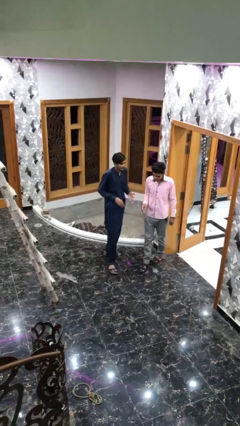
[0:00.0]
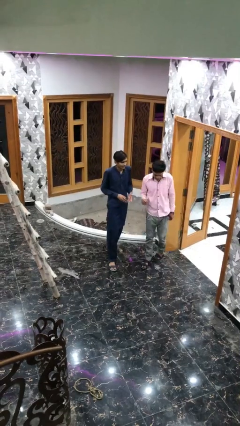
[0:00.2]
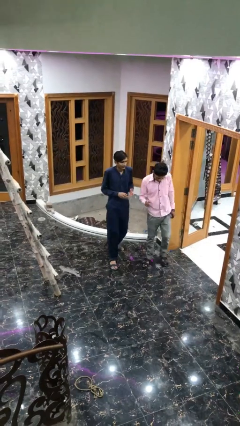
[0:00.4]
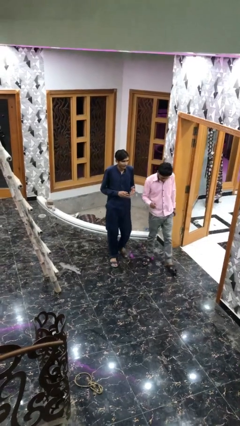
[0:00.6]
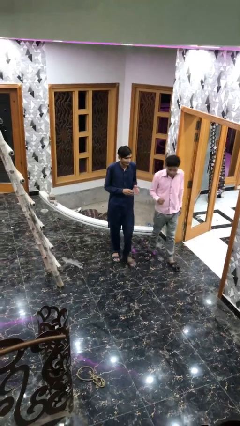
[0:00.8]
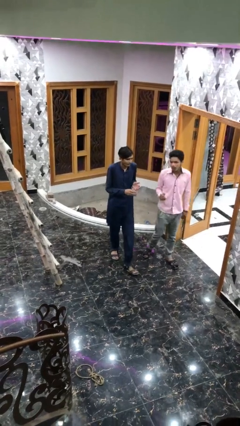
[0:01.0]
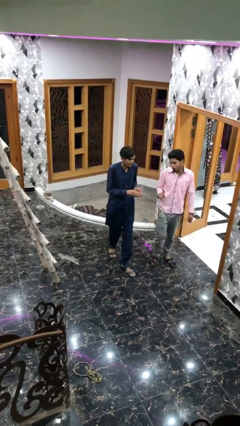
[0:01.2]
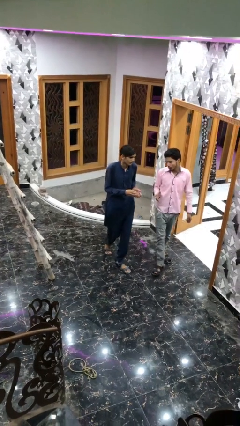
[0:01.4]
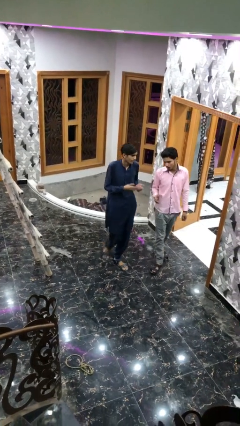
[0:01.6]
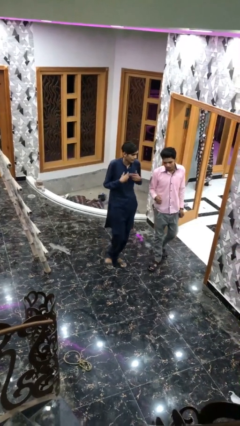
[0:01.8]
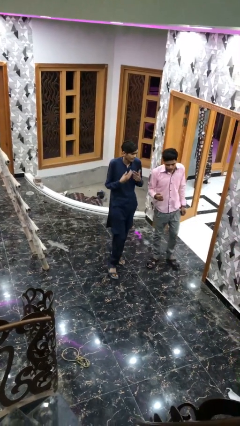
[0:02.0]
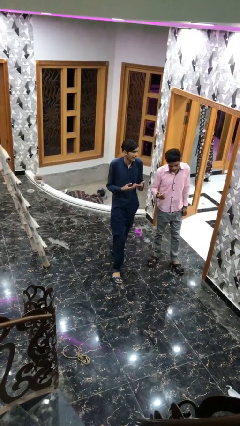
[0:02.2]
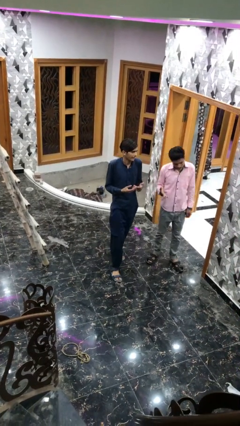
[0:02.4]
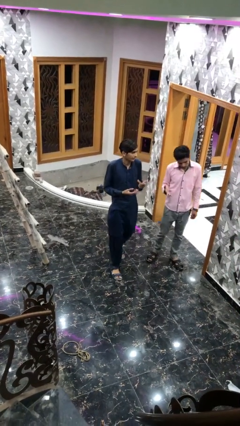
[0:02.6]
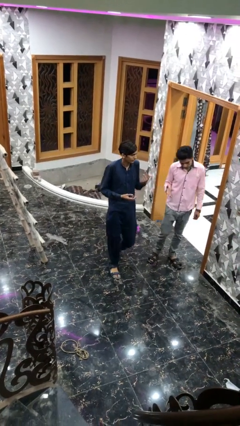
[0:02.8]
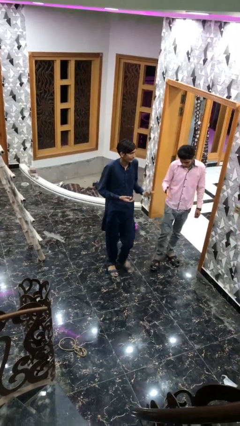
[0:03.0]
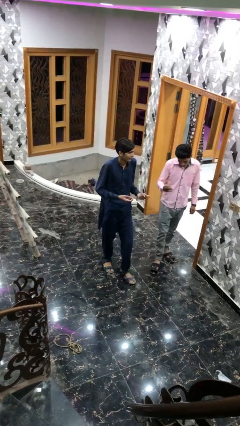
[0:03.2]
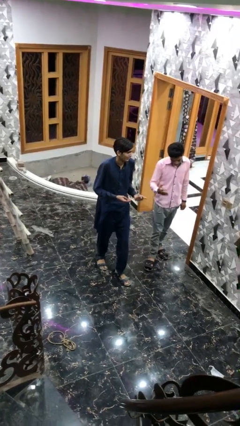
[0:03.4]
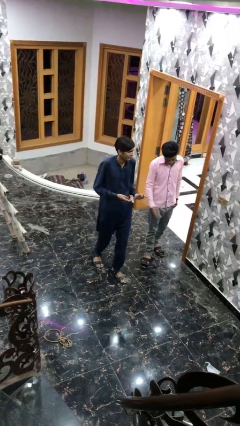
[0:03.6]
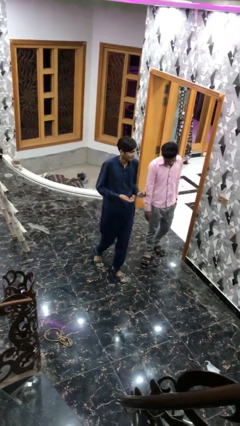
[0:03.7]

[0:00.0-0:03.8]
person talks to person

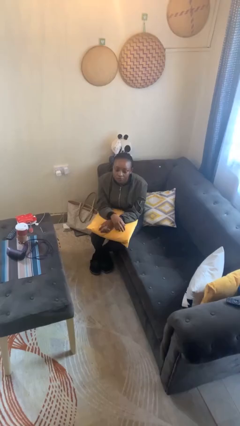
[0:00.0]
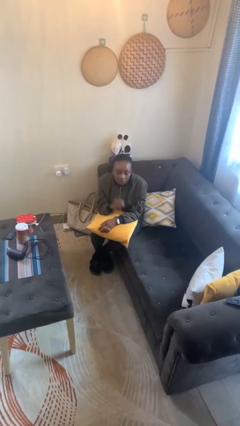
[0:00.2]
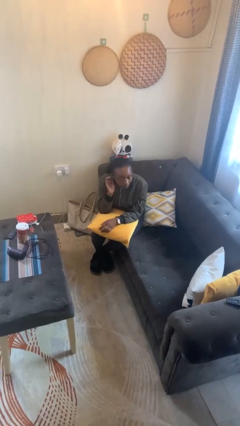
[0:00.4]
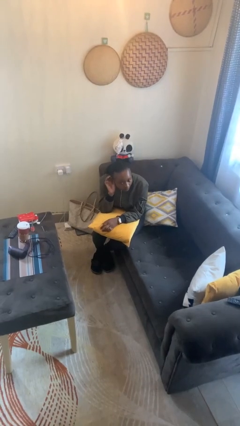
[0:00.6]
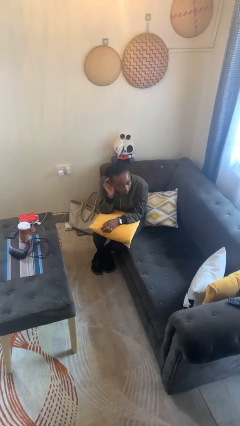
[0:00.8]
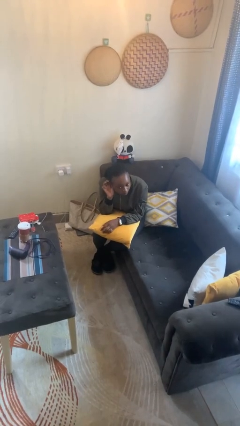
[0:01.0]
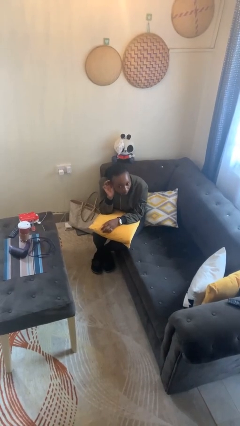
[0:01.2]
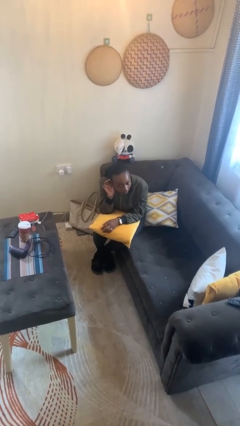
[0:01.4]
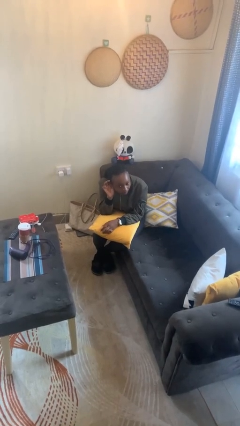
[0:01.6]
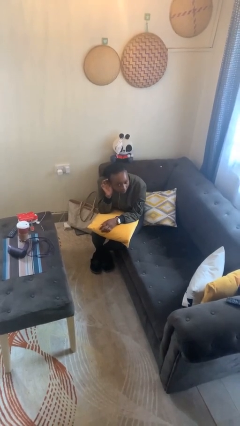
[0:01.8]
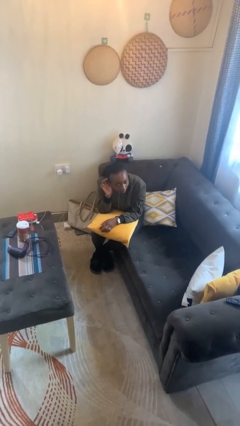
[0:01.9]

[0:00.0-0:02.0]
person gestures listen closely

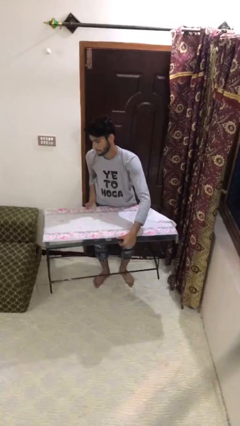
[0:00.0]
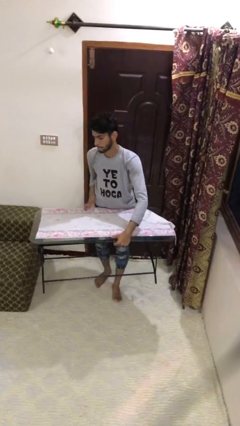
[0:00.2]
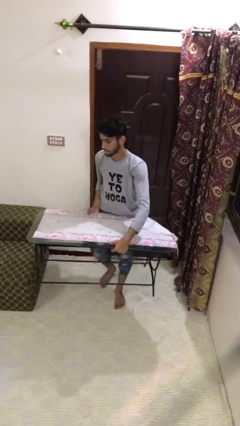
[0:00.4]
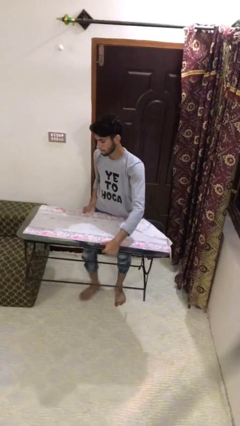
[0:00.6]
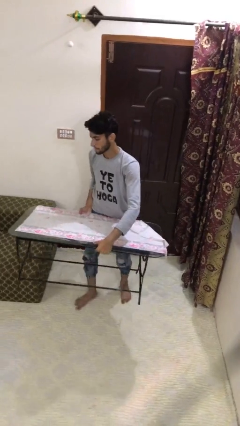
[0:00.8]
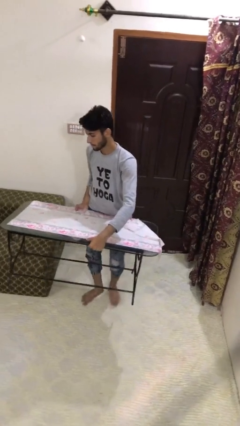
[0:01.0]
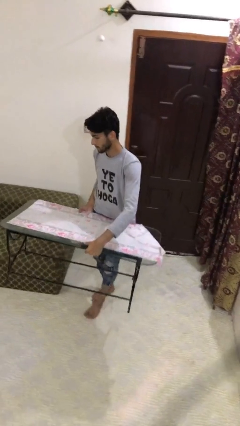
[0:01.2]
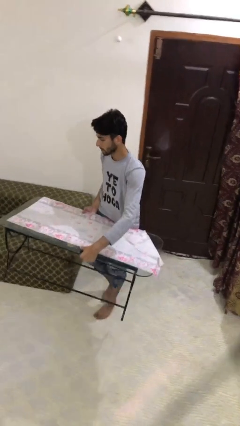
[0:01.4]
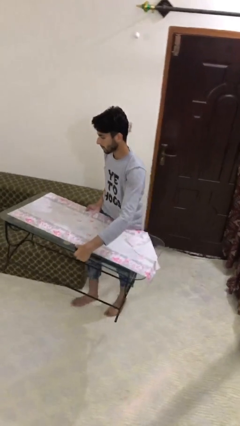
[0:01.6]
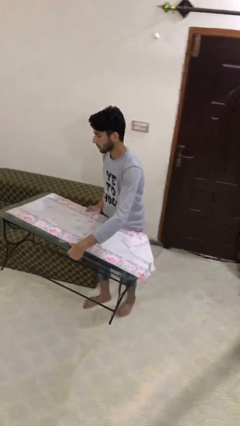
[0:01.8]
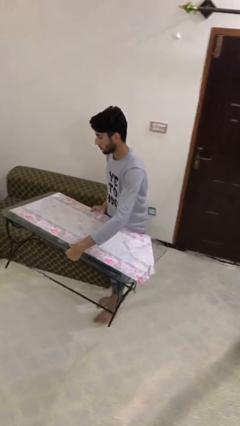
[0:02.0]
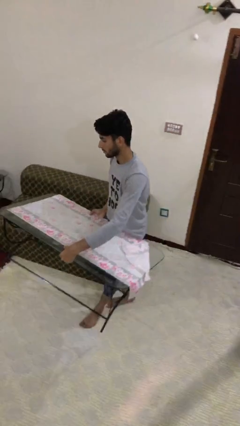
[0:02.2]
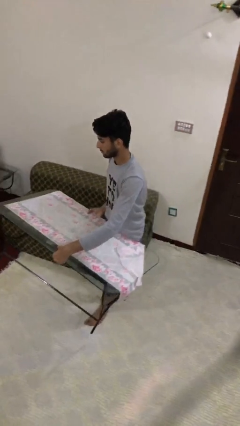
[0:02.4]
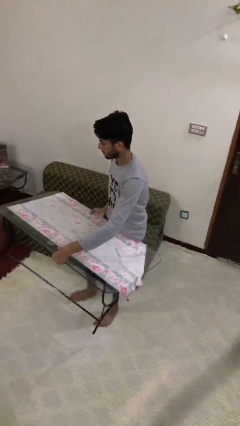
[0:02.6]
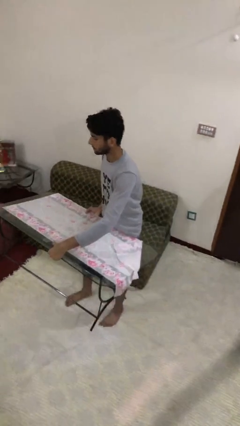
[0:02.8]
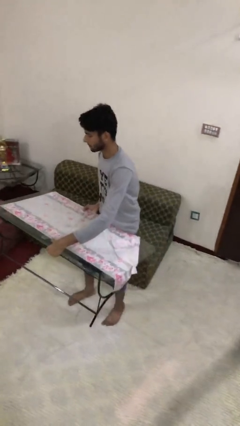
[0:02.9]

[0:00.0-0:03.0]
person carries heavy object

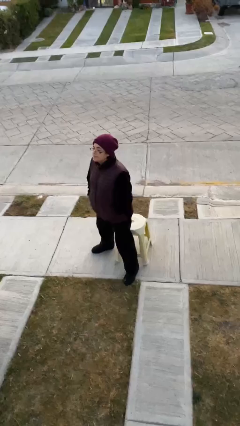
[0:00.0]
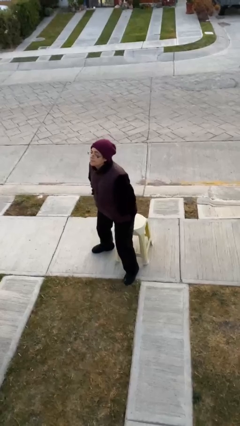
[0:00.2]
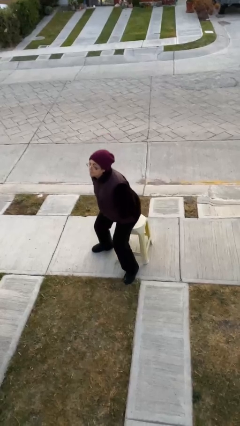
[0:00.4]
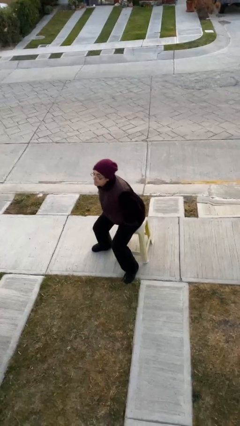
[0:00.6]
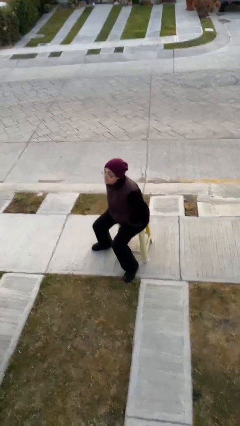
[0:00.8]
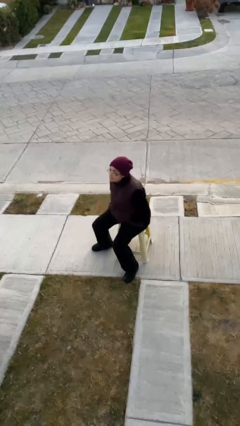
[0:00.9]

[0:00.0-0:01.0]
person sits down

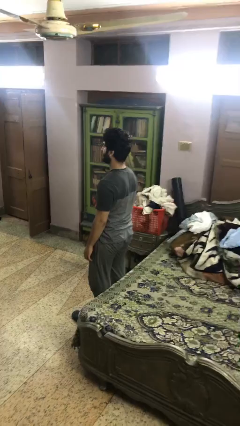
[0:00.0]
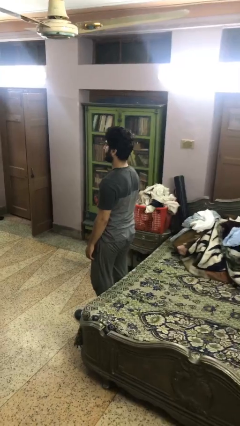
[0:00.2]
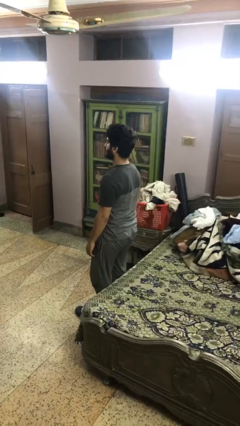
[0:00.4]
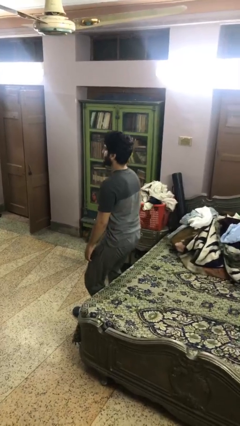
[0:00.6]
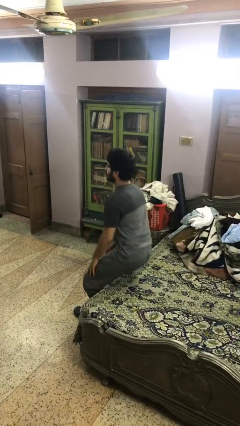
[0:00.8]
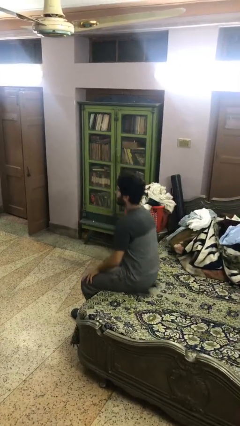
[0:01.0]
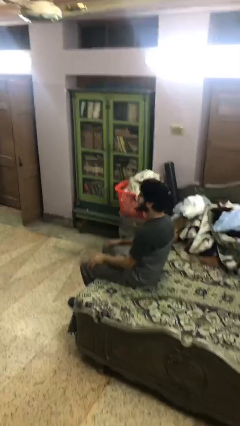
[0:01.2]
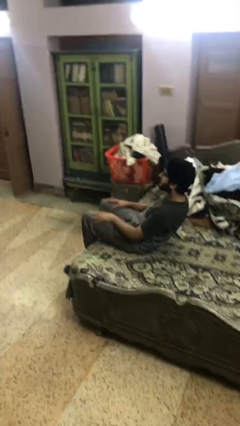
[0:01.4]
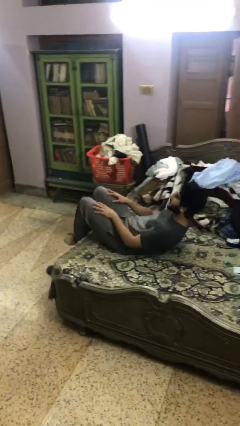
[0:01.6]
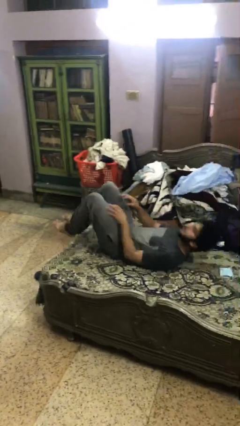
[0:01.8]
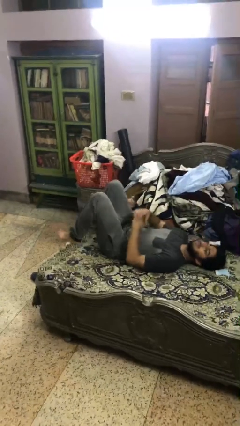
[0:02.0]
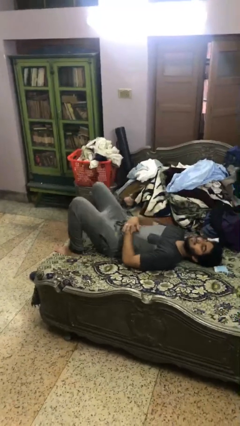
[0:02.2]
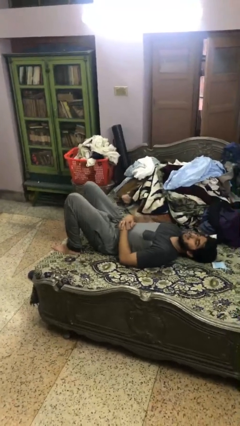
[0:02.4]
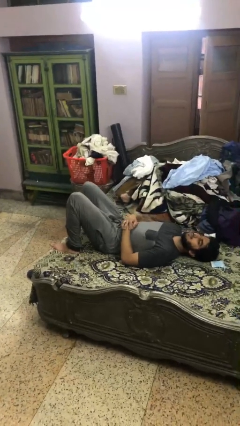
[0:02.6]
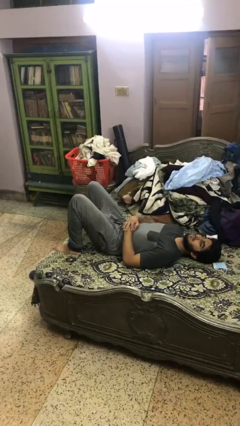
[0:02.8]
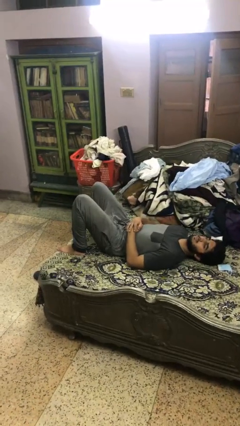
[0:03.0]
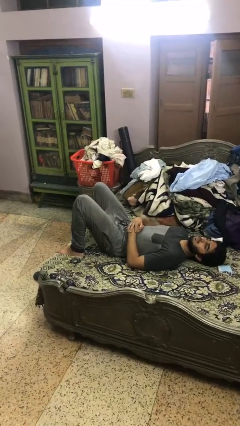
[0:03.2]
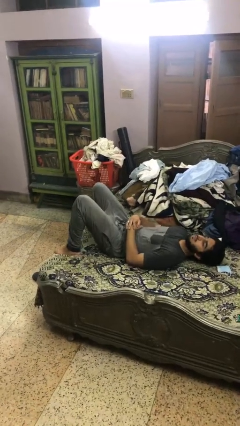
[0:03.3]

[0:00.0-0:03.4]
person lies down on bed

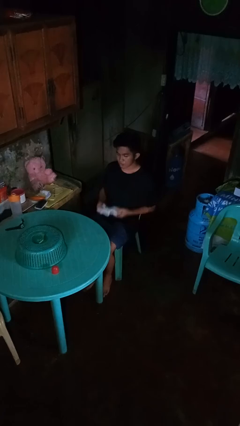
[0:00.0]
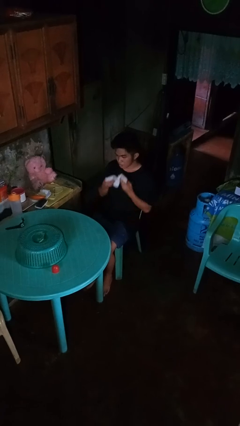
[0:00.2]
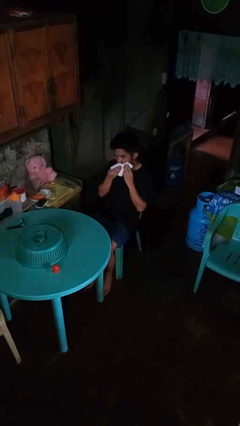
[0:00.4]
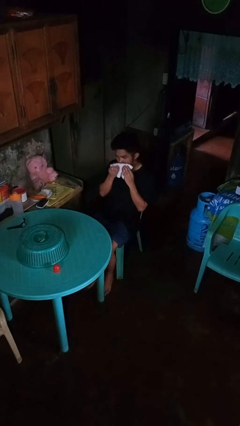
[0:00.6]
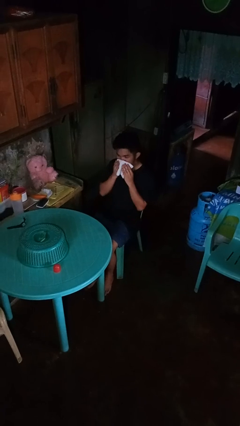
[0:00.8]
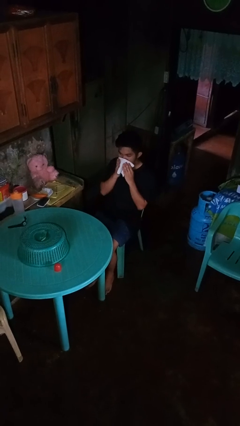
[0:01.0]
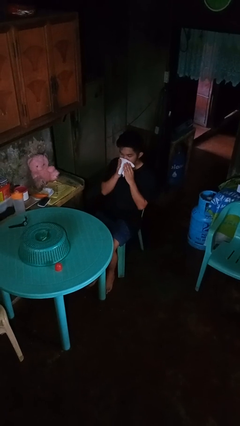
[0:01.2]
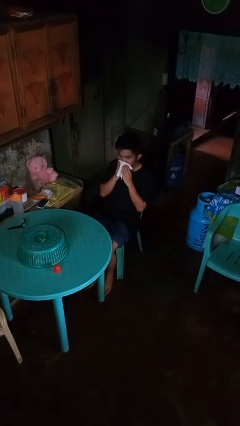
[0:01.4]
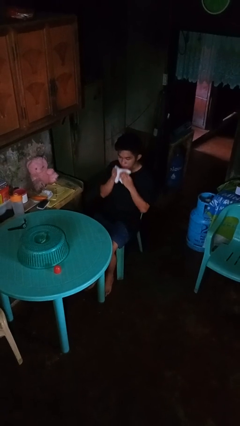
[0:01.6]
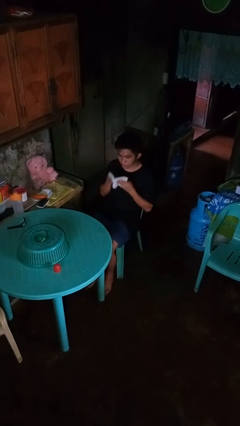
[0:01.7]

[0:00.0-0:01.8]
person wipes mouth with napkin

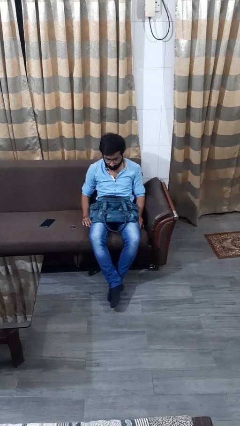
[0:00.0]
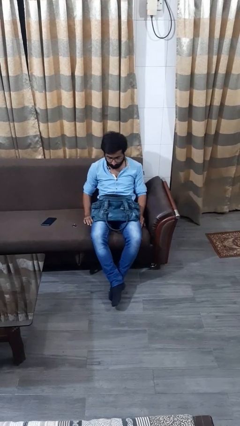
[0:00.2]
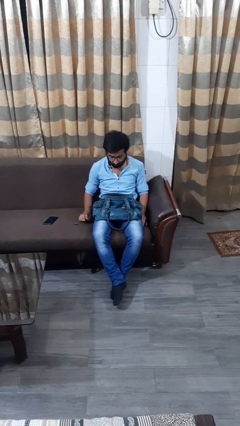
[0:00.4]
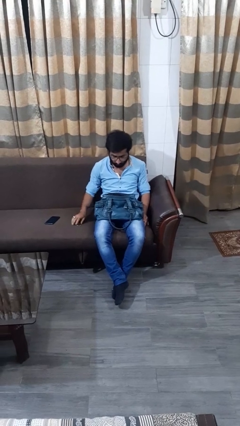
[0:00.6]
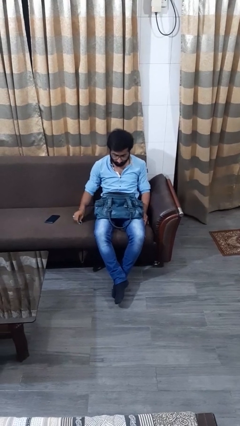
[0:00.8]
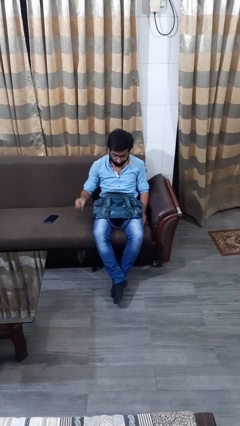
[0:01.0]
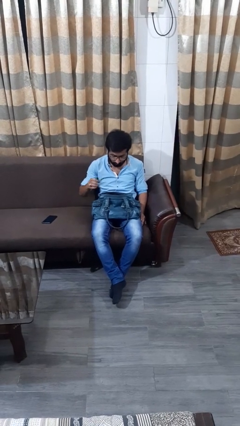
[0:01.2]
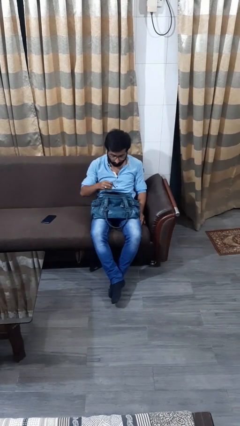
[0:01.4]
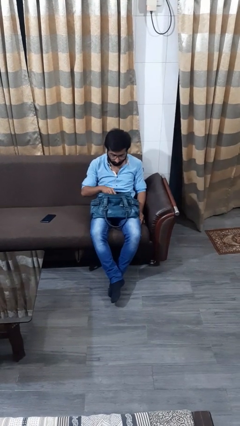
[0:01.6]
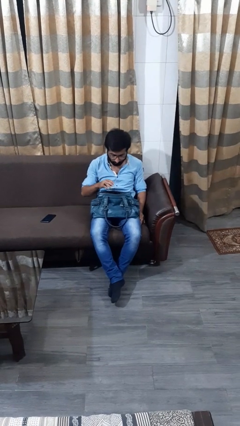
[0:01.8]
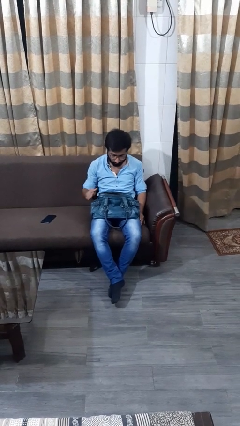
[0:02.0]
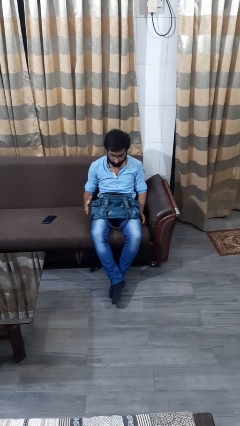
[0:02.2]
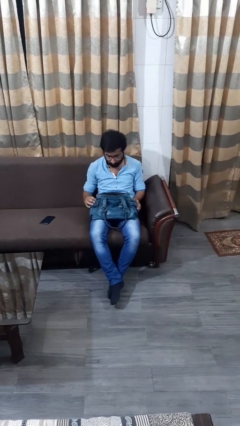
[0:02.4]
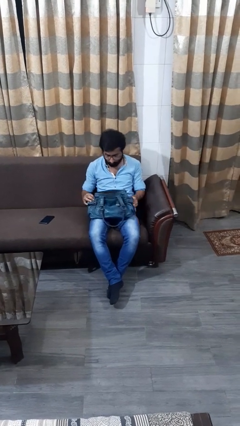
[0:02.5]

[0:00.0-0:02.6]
person puts object into purse
